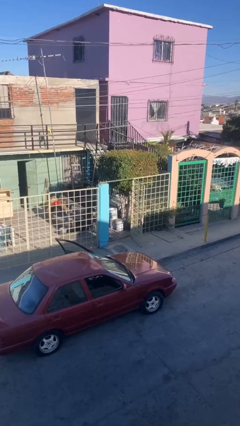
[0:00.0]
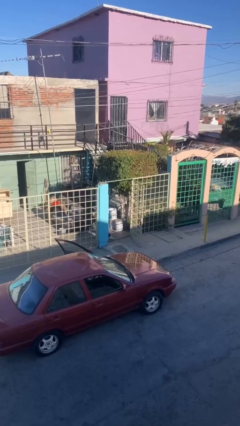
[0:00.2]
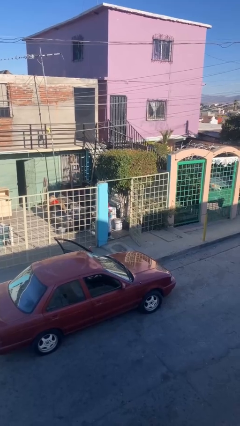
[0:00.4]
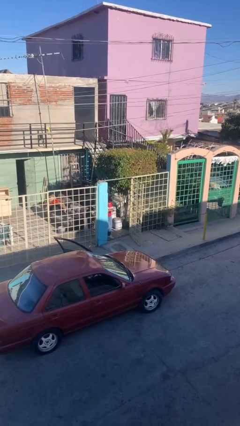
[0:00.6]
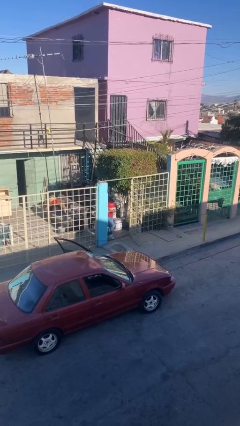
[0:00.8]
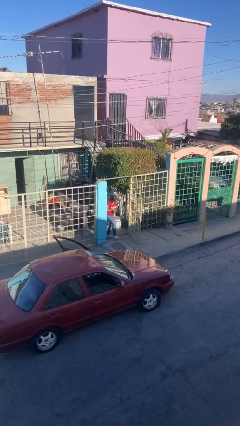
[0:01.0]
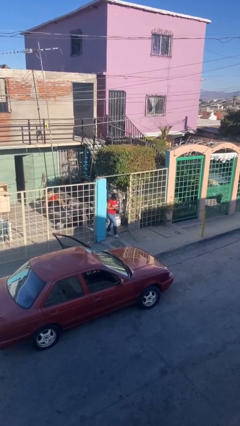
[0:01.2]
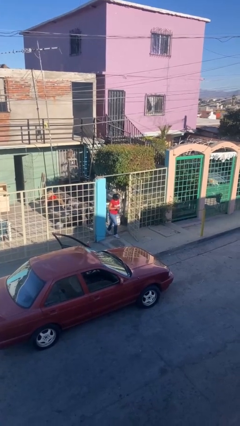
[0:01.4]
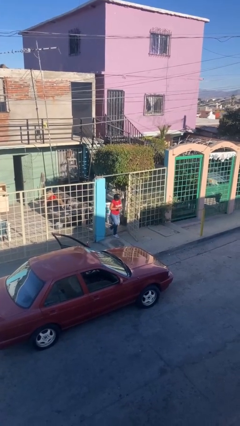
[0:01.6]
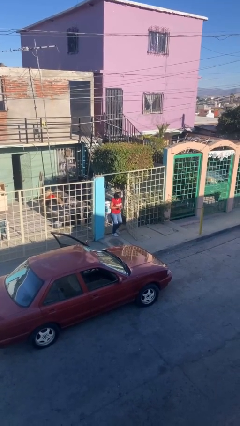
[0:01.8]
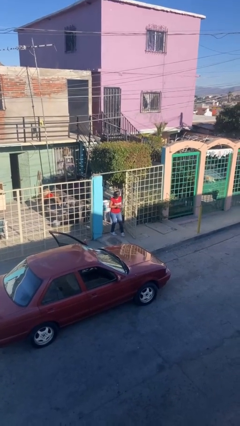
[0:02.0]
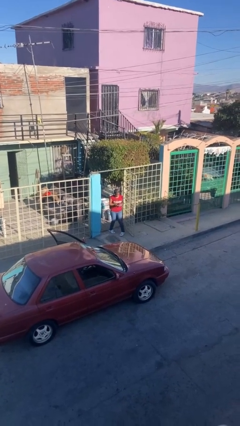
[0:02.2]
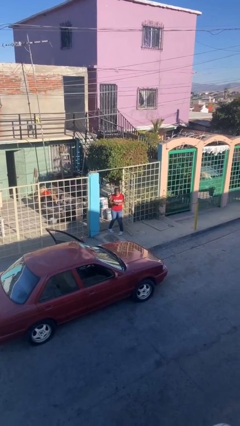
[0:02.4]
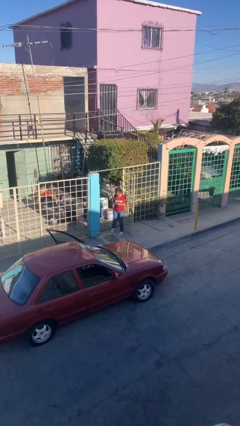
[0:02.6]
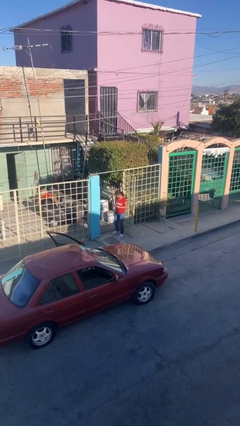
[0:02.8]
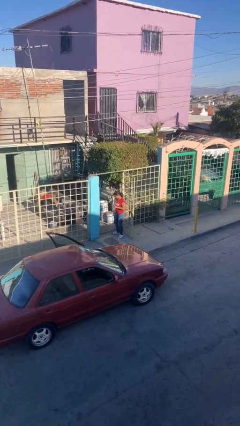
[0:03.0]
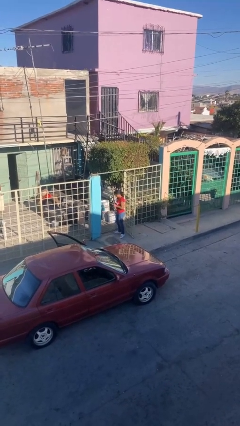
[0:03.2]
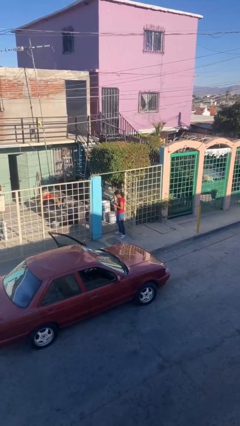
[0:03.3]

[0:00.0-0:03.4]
person enters scene through structure

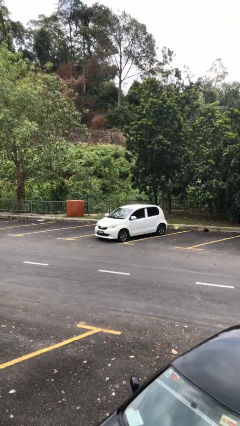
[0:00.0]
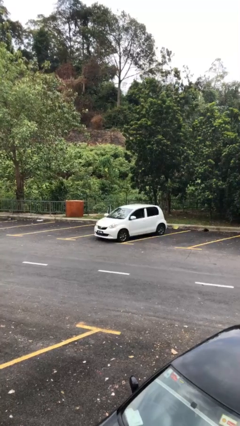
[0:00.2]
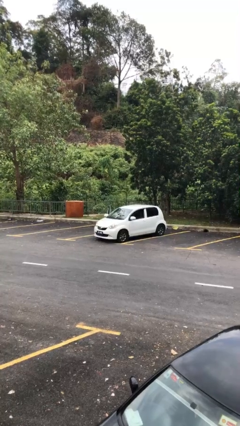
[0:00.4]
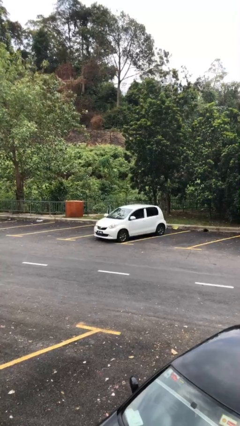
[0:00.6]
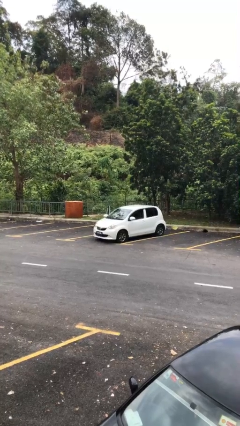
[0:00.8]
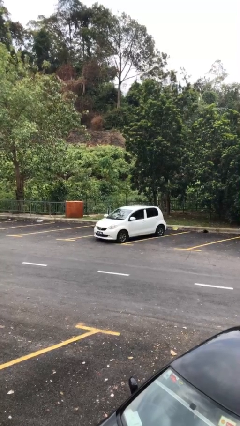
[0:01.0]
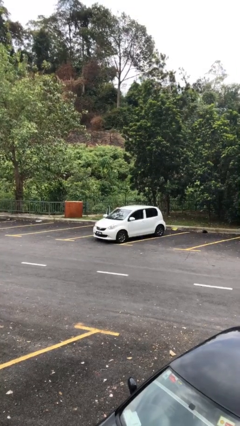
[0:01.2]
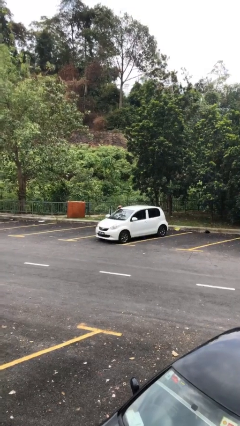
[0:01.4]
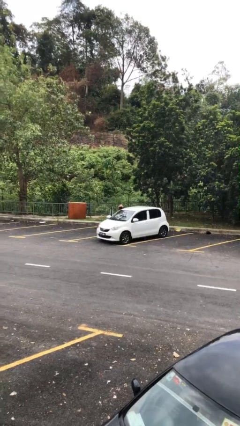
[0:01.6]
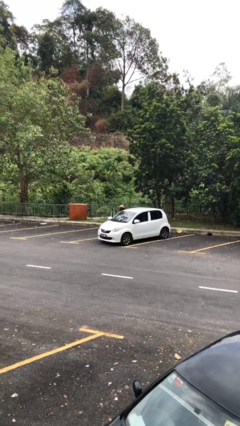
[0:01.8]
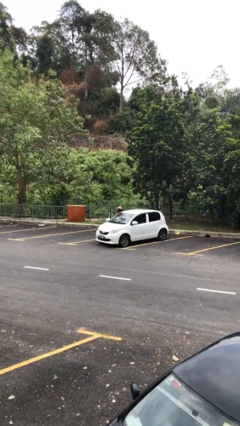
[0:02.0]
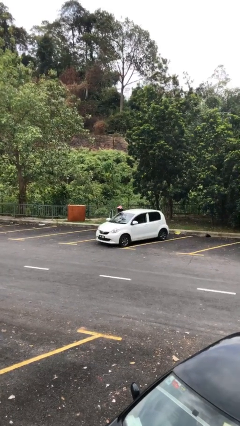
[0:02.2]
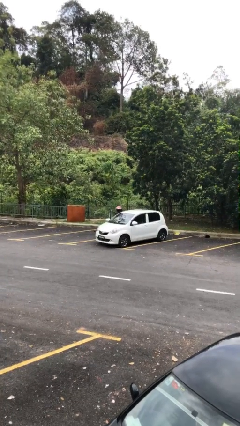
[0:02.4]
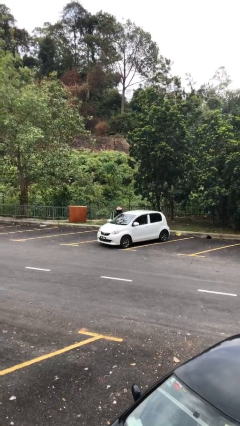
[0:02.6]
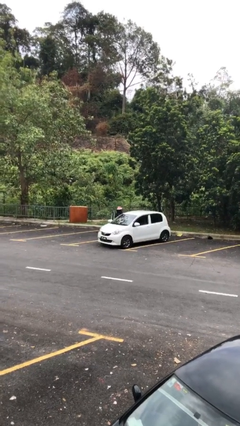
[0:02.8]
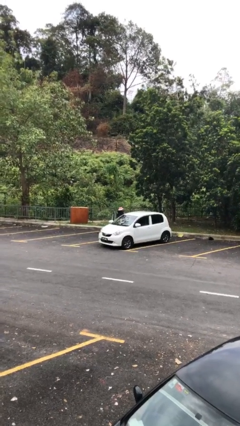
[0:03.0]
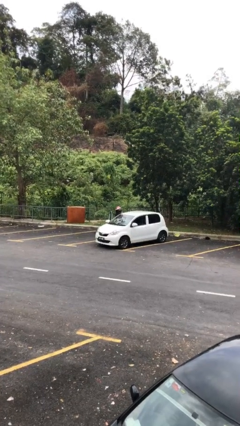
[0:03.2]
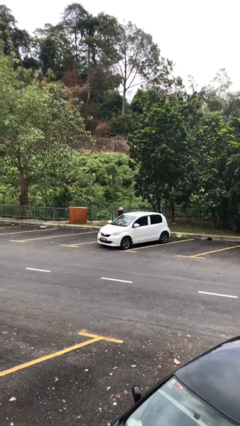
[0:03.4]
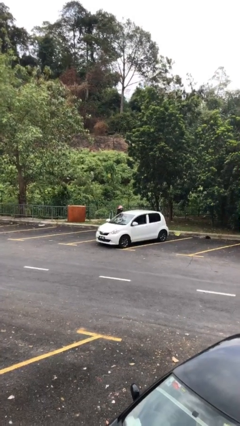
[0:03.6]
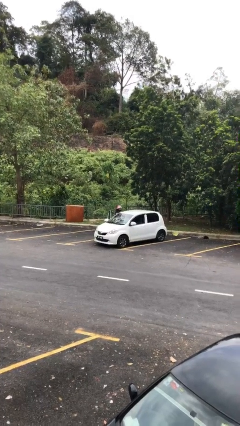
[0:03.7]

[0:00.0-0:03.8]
person exits car

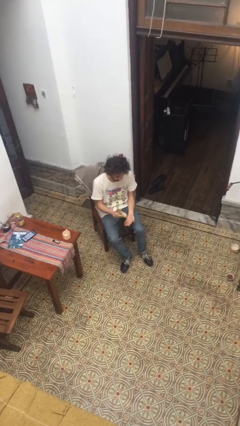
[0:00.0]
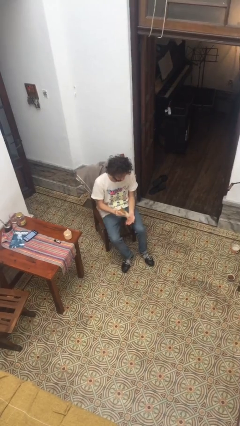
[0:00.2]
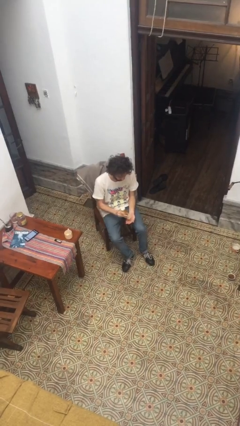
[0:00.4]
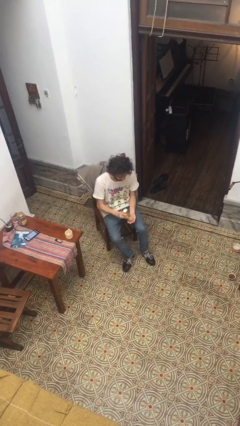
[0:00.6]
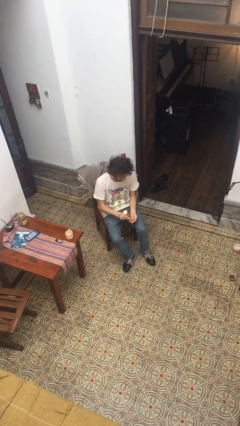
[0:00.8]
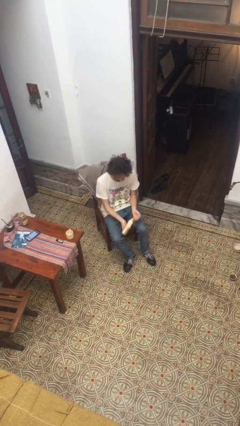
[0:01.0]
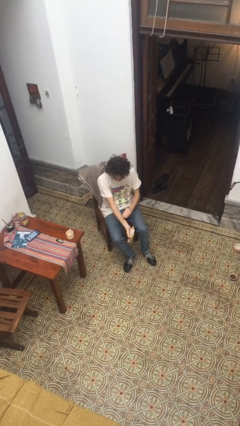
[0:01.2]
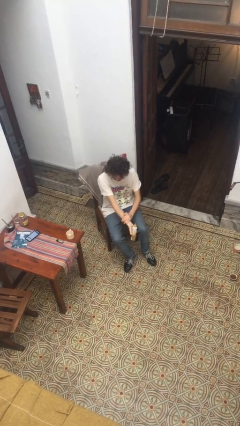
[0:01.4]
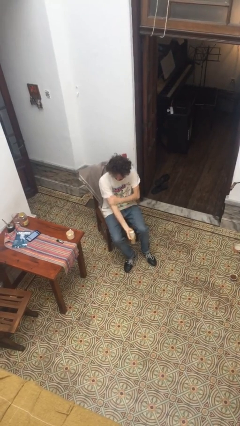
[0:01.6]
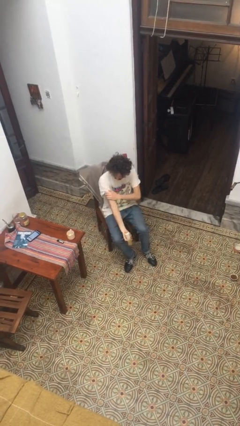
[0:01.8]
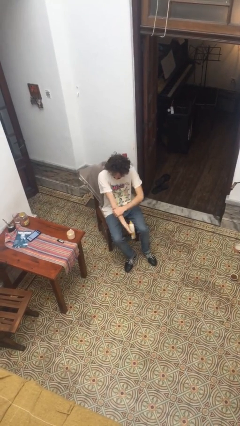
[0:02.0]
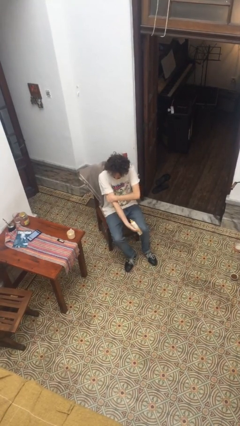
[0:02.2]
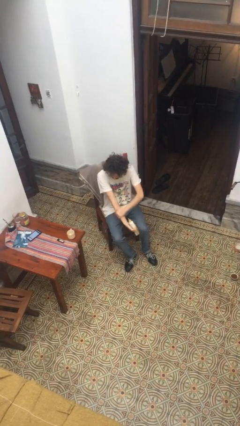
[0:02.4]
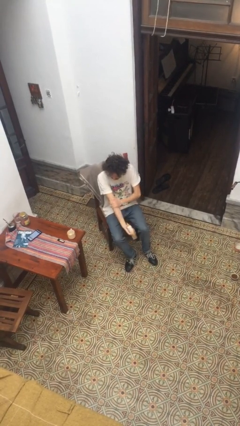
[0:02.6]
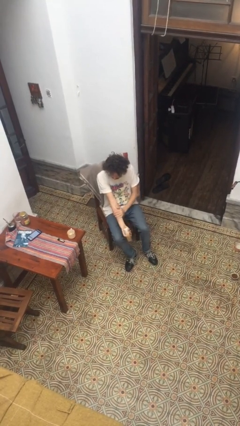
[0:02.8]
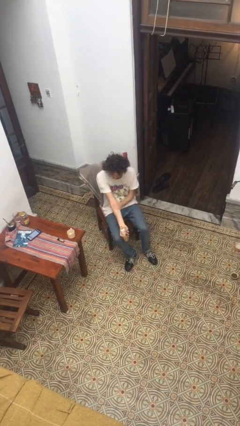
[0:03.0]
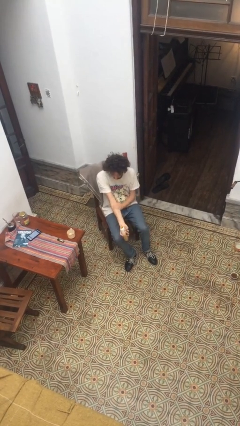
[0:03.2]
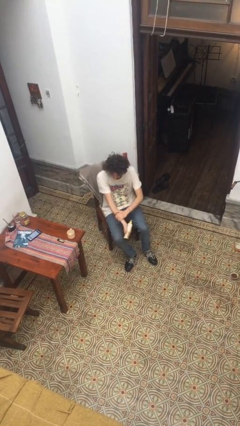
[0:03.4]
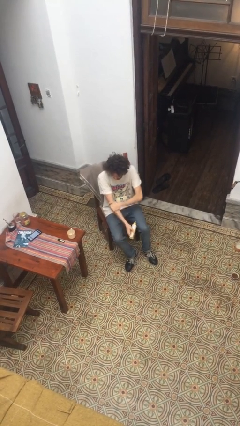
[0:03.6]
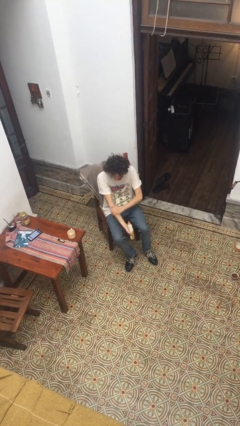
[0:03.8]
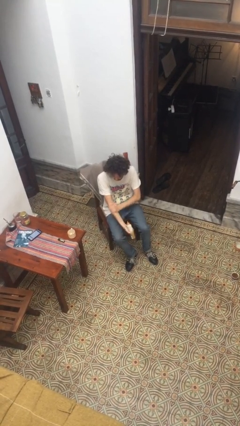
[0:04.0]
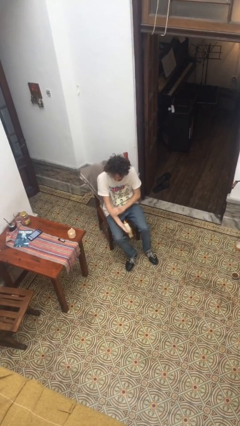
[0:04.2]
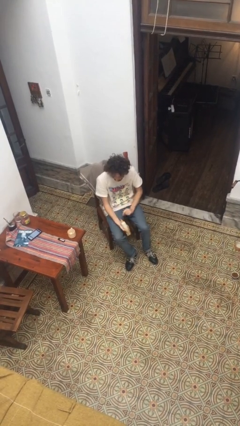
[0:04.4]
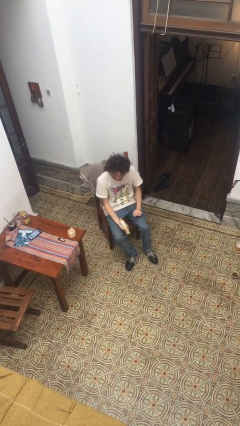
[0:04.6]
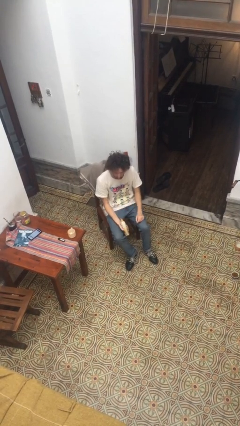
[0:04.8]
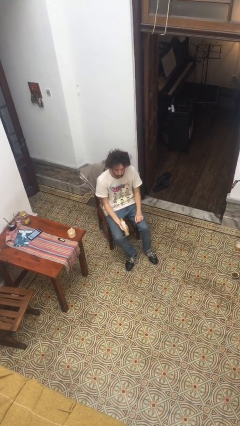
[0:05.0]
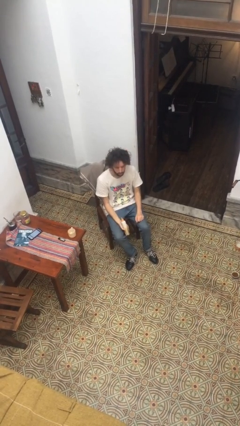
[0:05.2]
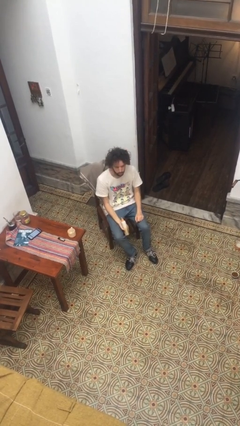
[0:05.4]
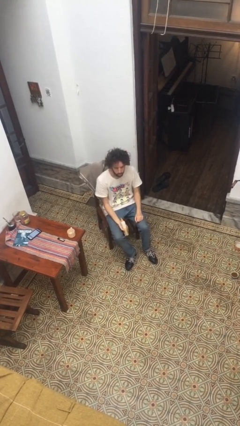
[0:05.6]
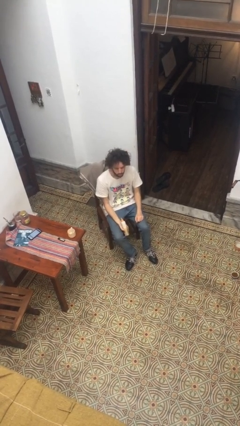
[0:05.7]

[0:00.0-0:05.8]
person applies sunscreen

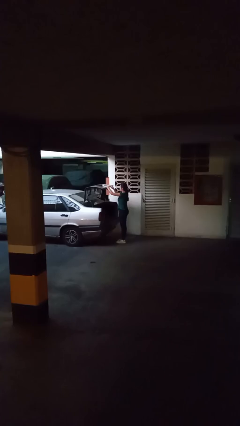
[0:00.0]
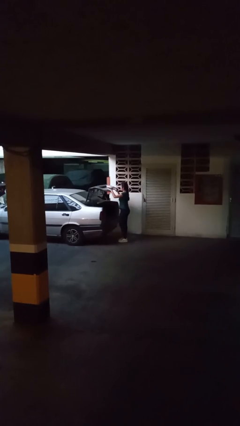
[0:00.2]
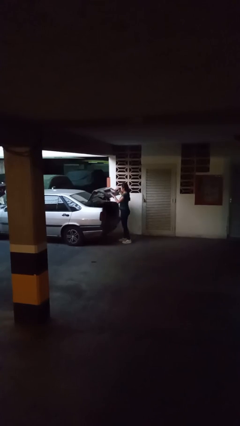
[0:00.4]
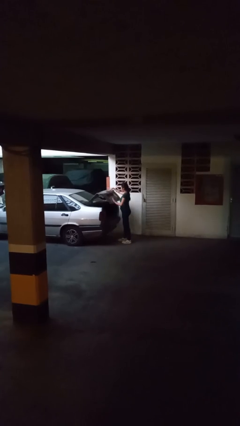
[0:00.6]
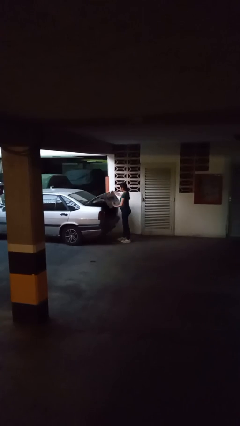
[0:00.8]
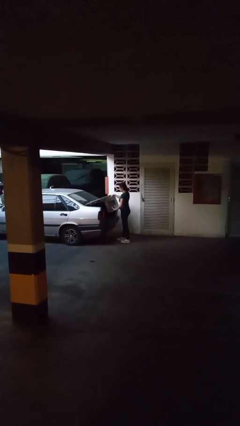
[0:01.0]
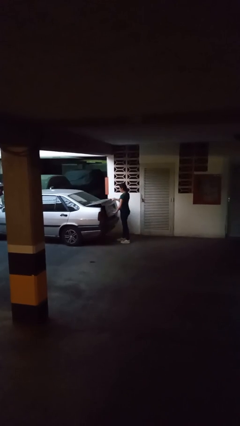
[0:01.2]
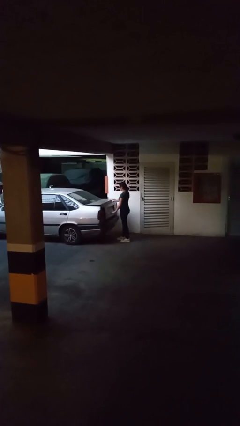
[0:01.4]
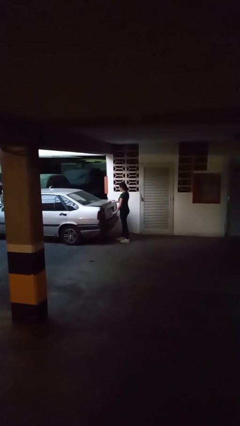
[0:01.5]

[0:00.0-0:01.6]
person closes car trunk

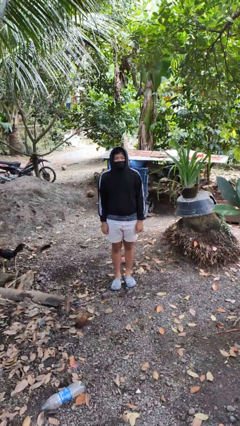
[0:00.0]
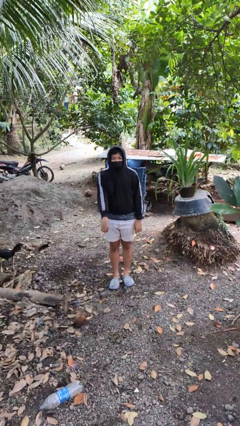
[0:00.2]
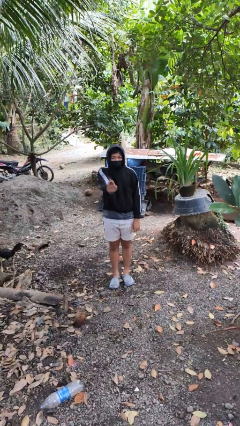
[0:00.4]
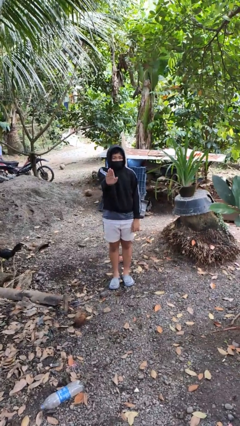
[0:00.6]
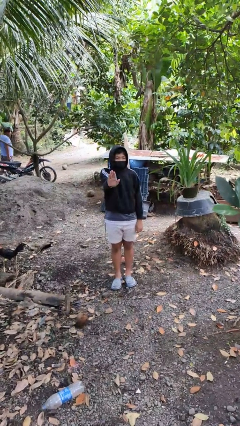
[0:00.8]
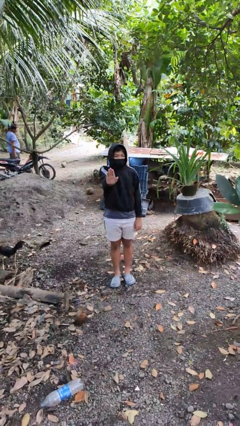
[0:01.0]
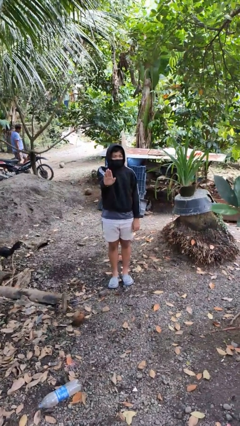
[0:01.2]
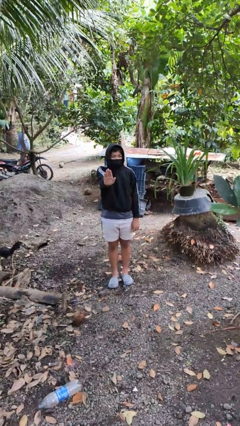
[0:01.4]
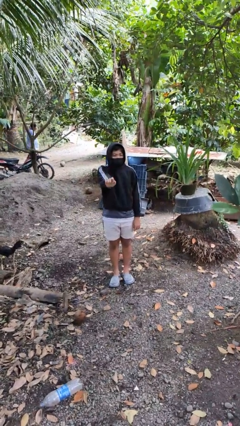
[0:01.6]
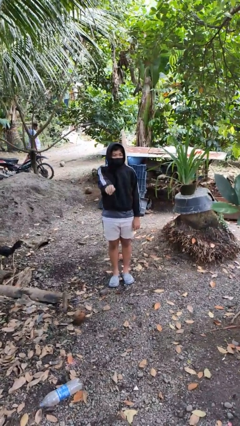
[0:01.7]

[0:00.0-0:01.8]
person gestures stop

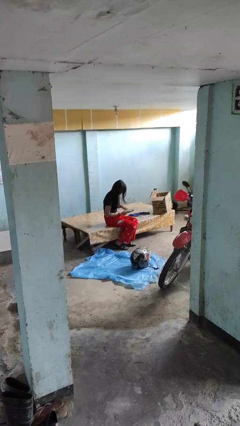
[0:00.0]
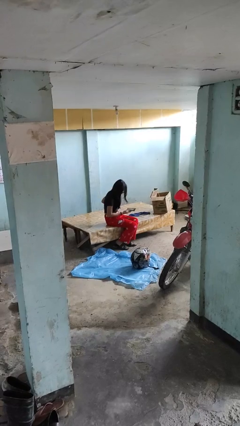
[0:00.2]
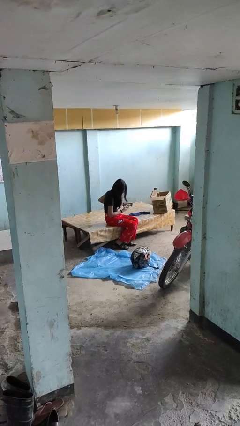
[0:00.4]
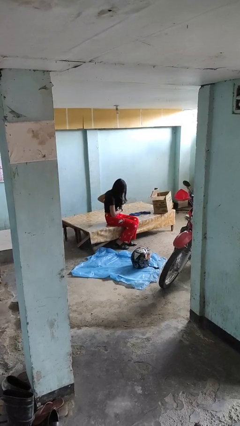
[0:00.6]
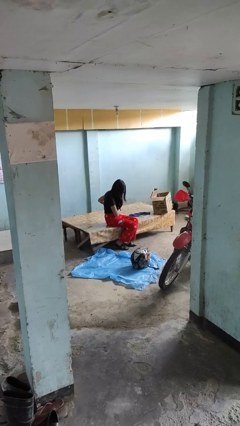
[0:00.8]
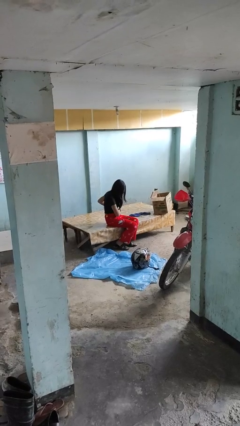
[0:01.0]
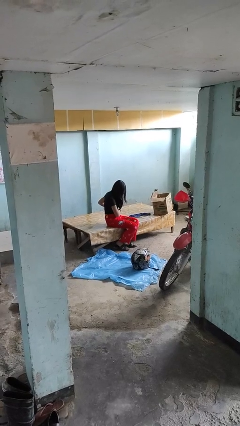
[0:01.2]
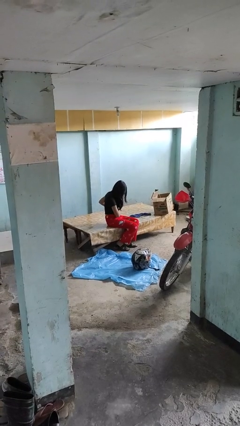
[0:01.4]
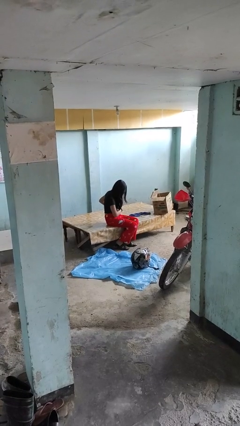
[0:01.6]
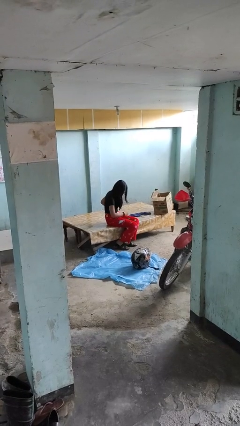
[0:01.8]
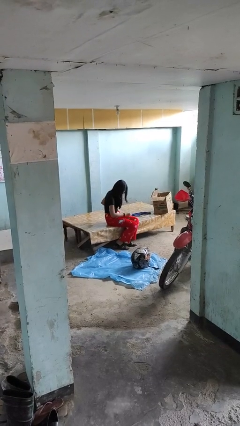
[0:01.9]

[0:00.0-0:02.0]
person puts phone into pocket
